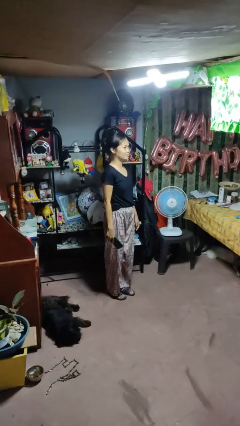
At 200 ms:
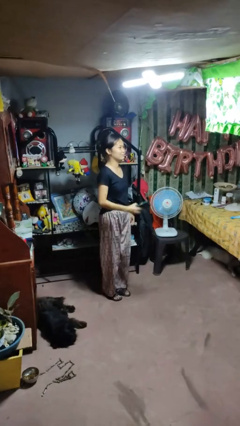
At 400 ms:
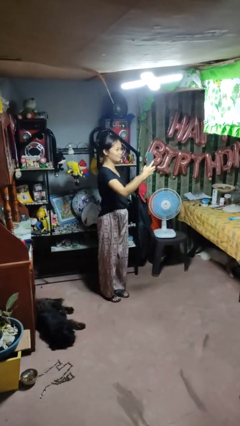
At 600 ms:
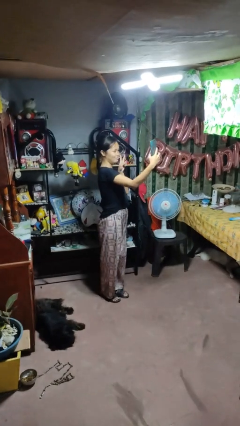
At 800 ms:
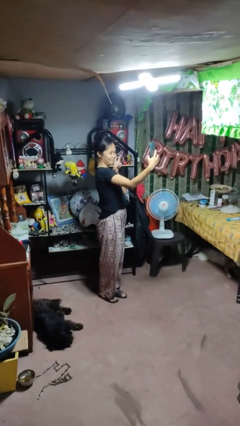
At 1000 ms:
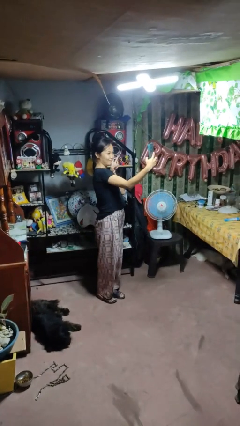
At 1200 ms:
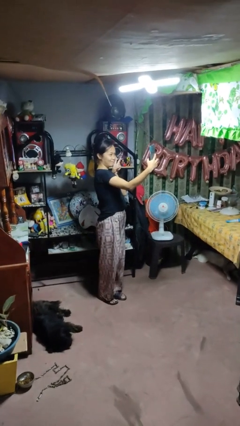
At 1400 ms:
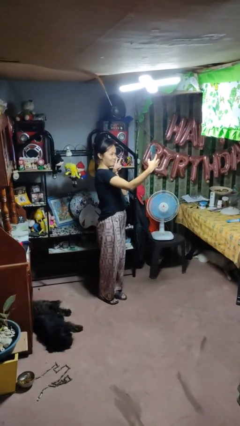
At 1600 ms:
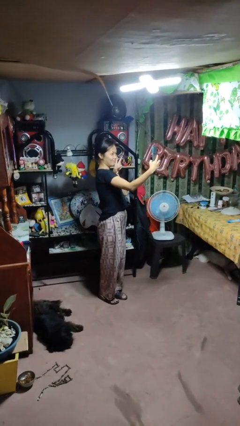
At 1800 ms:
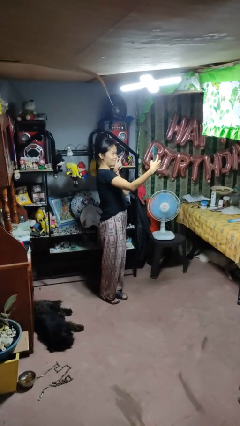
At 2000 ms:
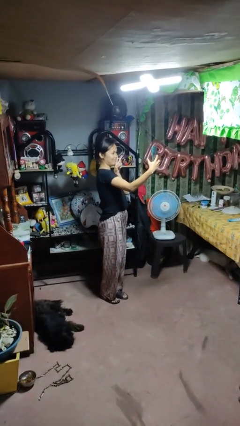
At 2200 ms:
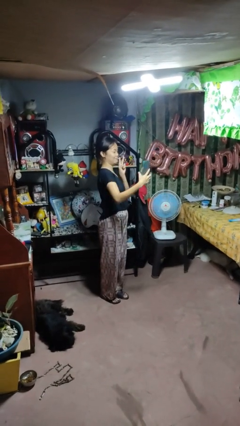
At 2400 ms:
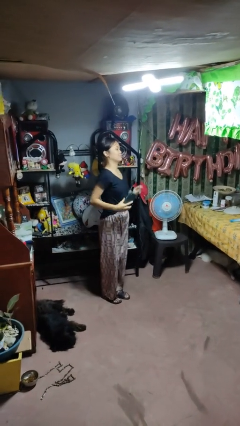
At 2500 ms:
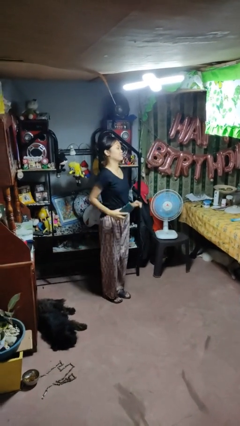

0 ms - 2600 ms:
person takes selfie

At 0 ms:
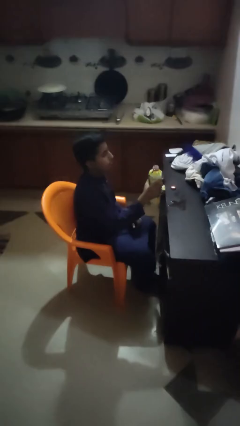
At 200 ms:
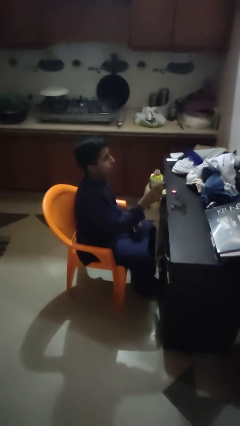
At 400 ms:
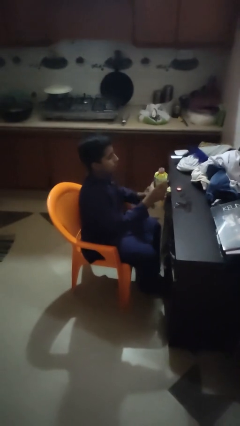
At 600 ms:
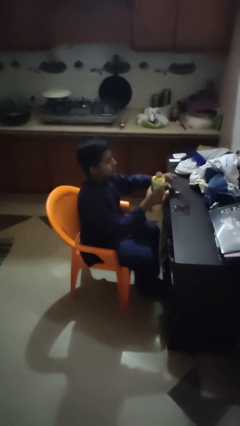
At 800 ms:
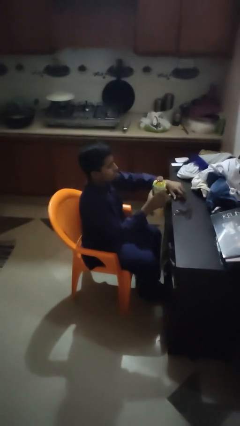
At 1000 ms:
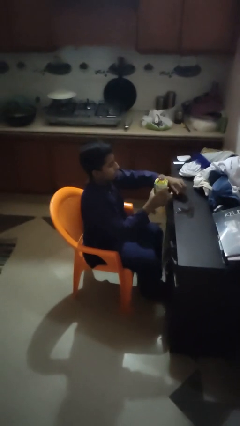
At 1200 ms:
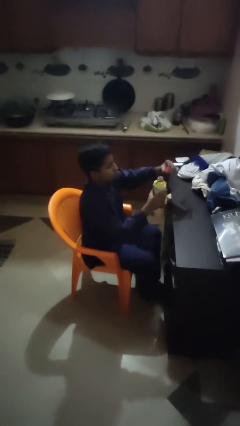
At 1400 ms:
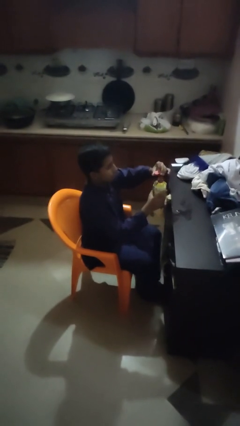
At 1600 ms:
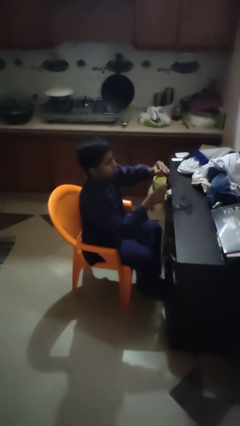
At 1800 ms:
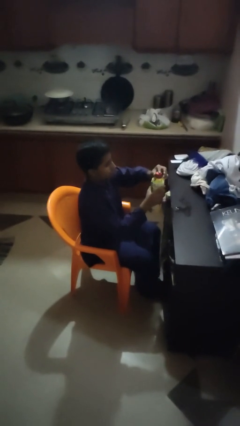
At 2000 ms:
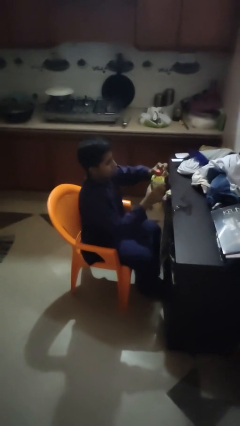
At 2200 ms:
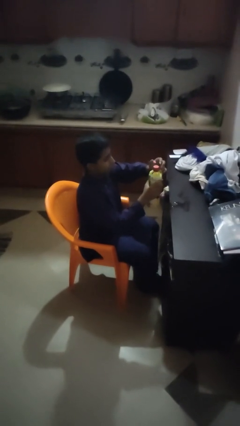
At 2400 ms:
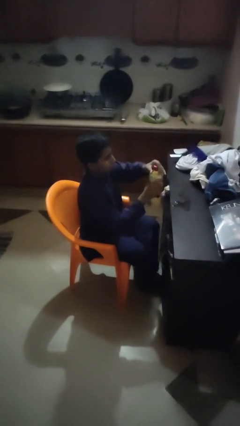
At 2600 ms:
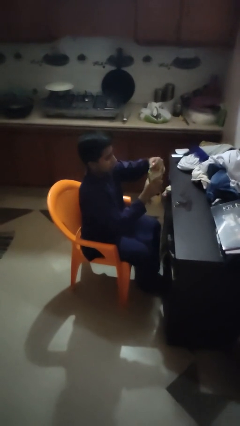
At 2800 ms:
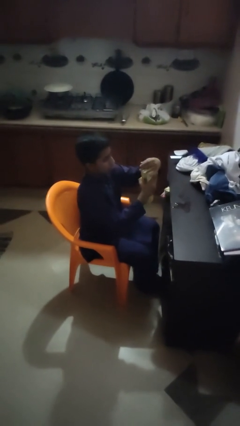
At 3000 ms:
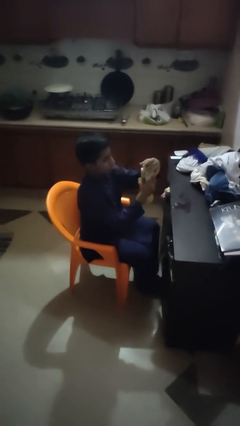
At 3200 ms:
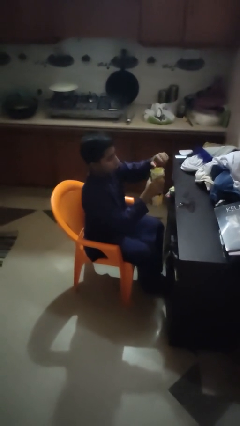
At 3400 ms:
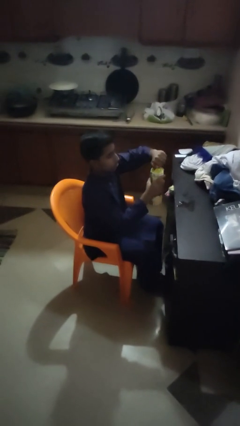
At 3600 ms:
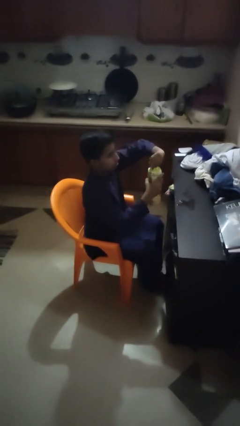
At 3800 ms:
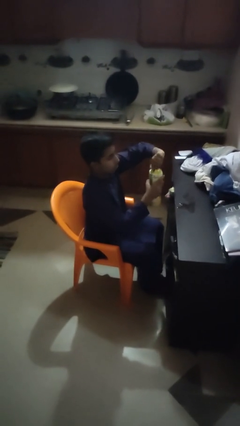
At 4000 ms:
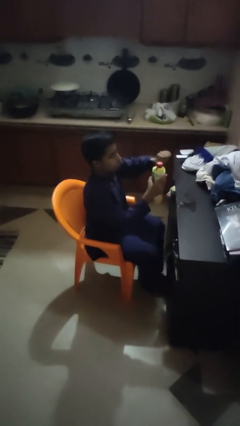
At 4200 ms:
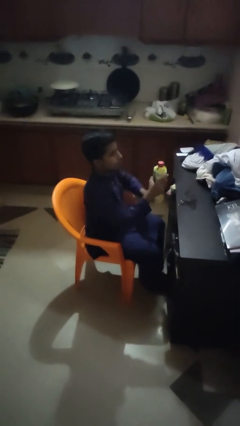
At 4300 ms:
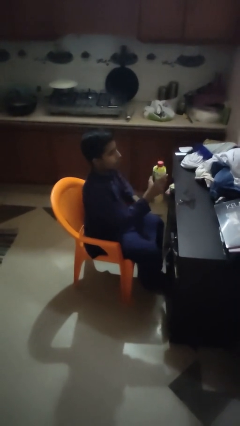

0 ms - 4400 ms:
person screws lid to bottle

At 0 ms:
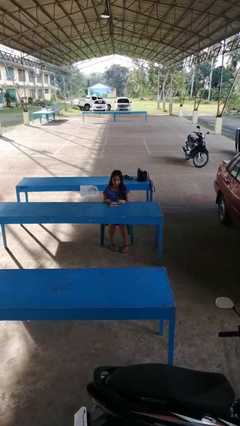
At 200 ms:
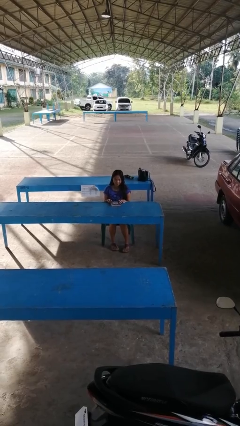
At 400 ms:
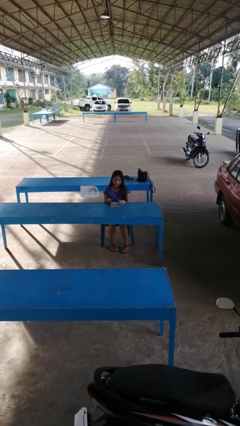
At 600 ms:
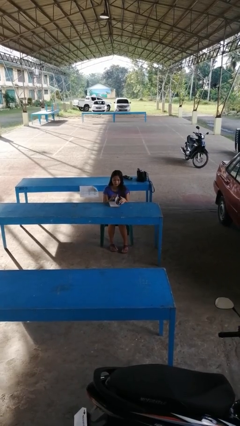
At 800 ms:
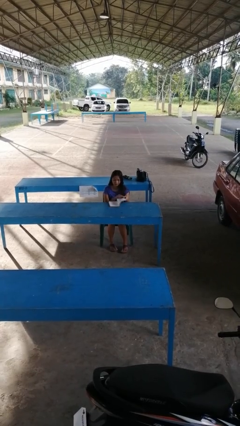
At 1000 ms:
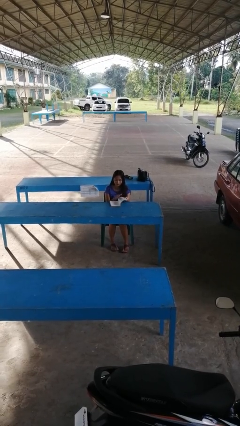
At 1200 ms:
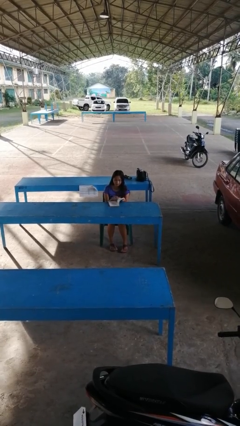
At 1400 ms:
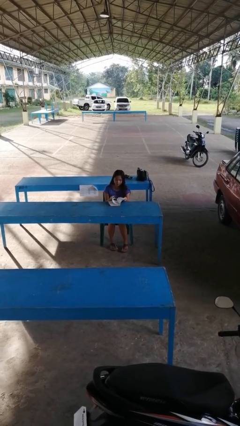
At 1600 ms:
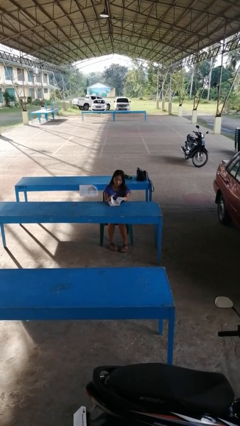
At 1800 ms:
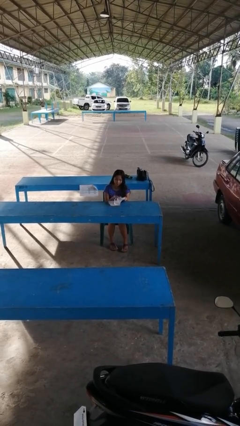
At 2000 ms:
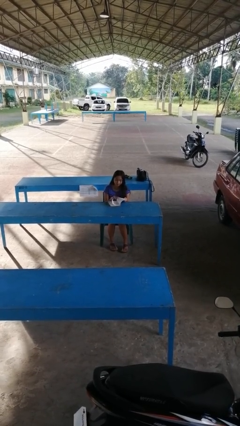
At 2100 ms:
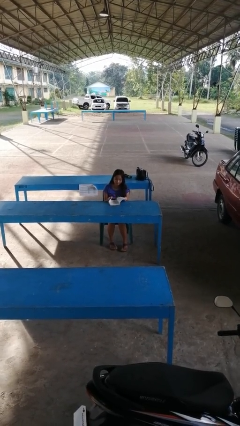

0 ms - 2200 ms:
person reads book

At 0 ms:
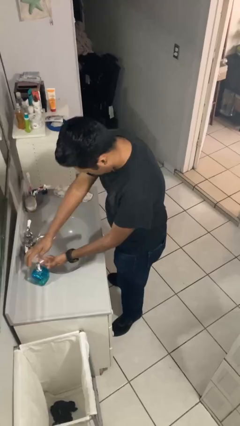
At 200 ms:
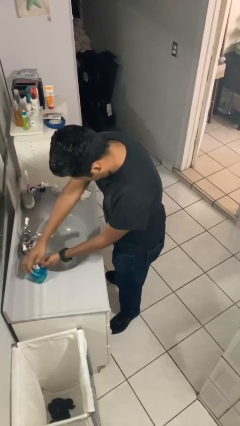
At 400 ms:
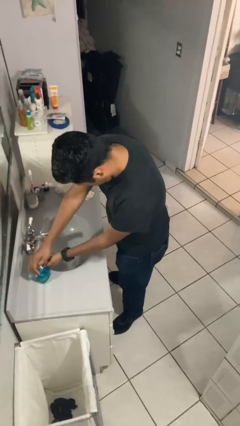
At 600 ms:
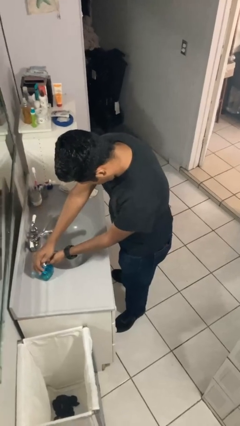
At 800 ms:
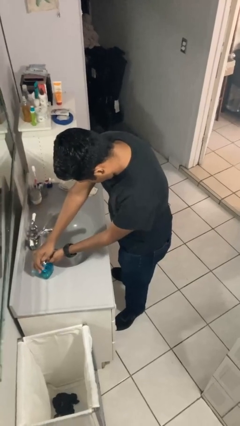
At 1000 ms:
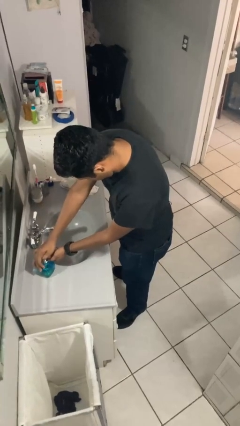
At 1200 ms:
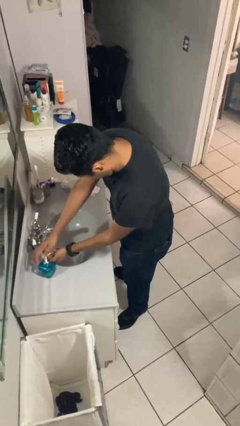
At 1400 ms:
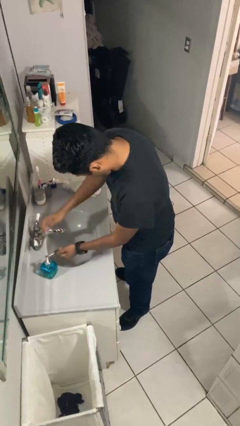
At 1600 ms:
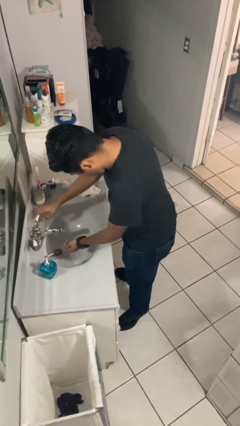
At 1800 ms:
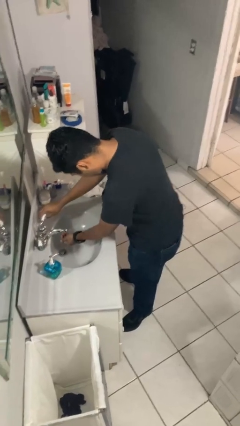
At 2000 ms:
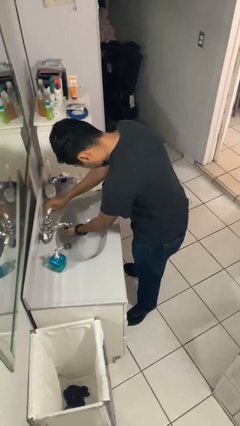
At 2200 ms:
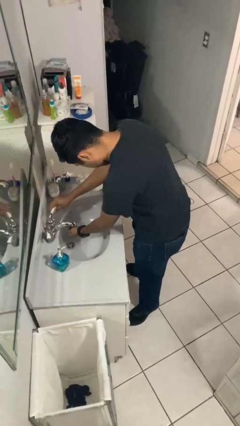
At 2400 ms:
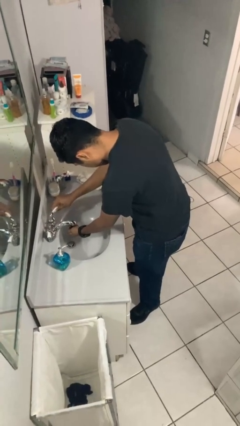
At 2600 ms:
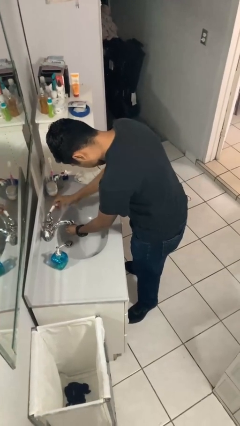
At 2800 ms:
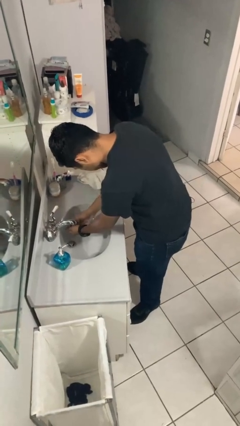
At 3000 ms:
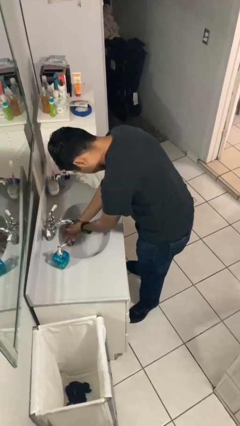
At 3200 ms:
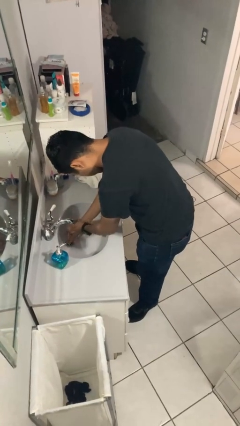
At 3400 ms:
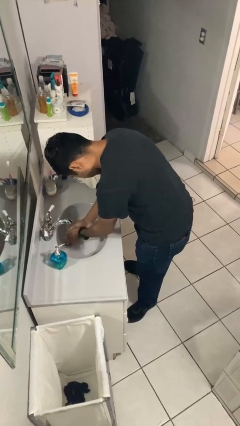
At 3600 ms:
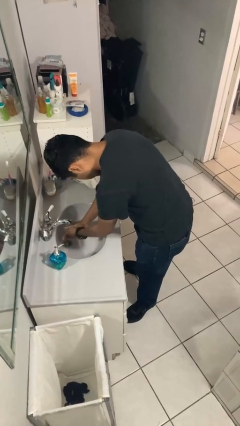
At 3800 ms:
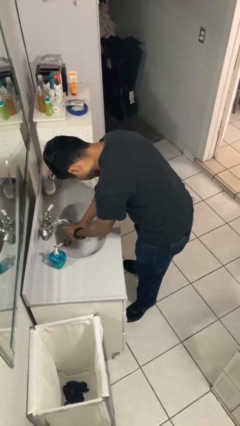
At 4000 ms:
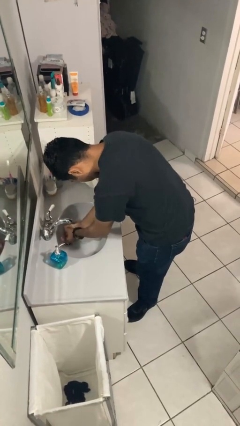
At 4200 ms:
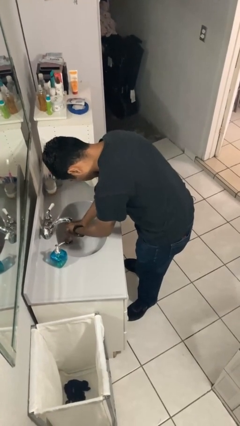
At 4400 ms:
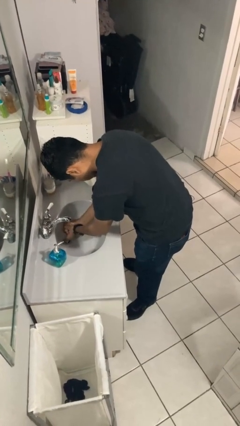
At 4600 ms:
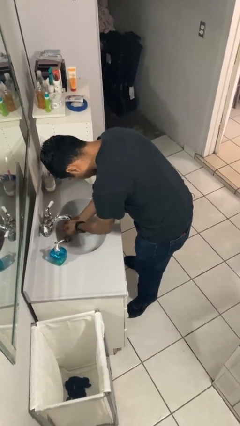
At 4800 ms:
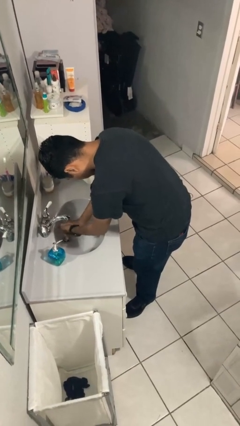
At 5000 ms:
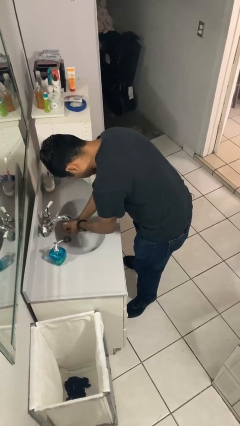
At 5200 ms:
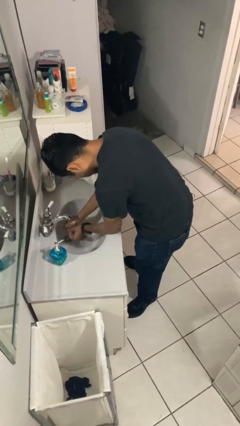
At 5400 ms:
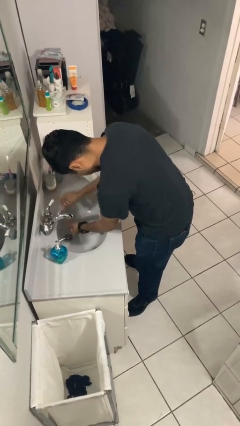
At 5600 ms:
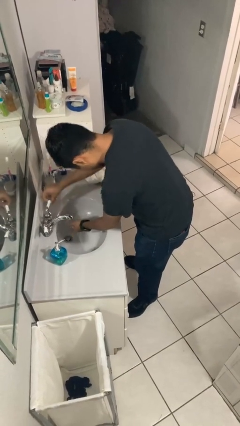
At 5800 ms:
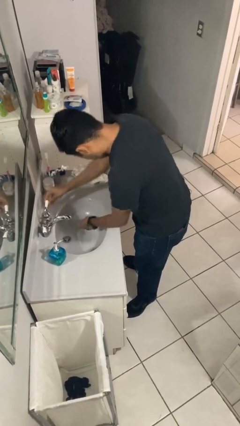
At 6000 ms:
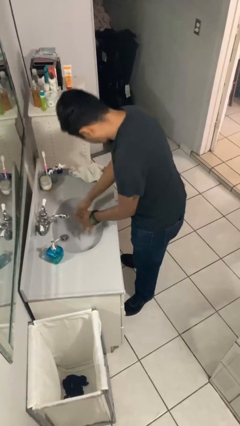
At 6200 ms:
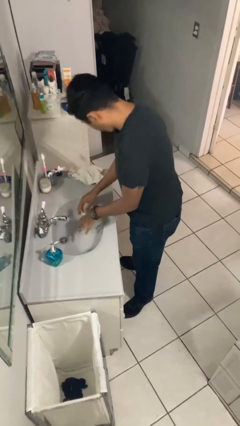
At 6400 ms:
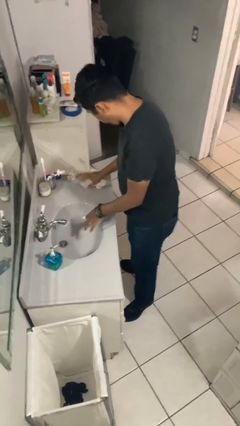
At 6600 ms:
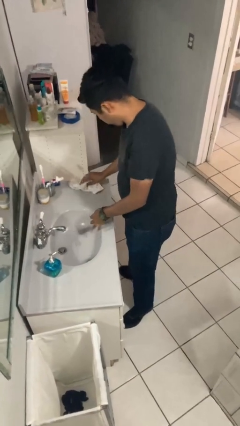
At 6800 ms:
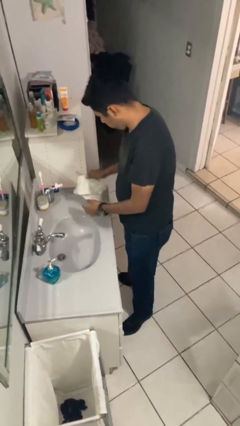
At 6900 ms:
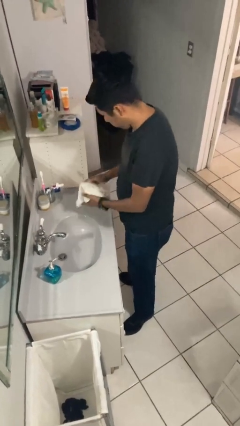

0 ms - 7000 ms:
person washes hands

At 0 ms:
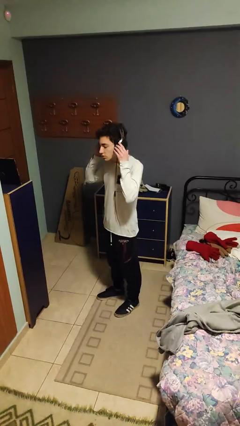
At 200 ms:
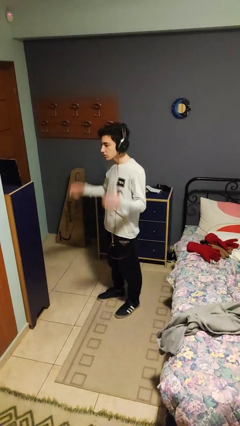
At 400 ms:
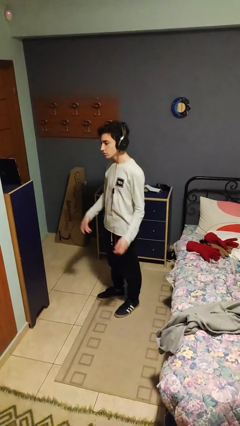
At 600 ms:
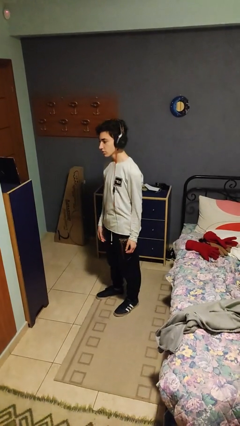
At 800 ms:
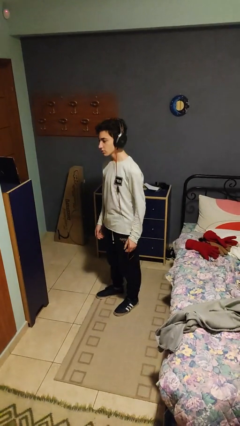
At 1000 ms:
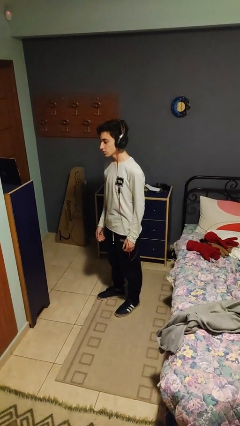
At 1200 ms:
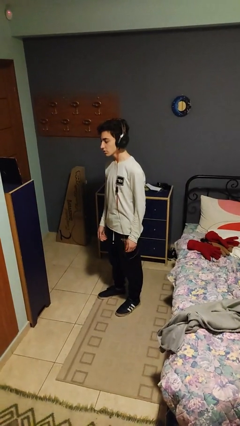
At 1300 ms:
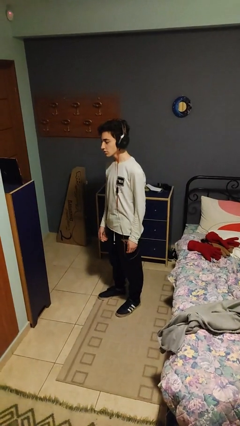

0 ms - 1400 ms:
person puts on headphones
